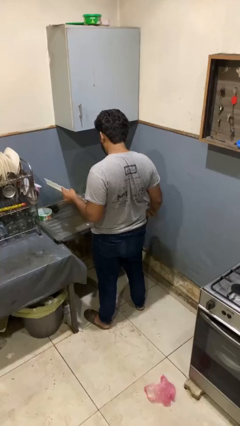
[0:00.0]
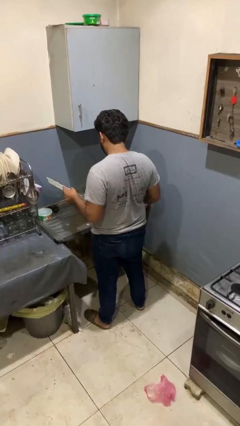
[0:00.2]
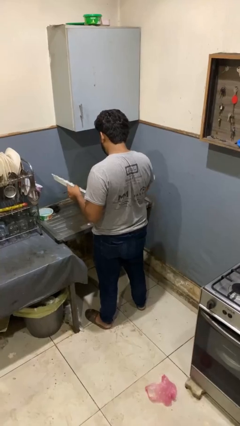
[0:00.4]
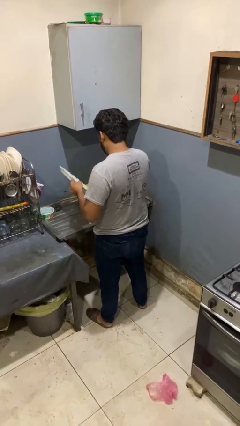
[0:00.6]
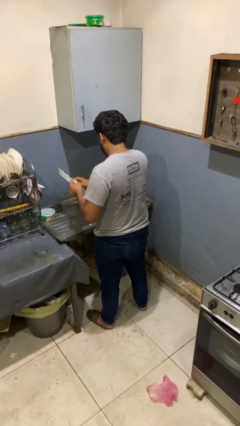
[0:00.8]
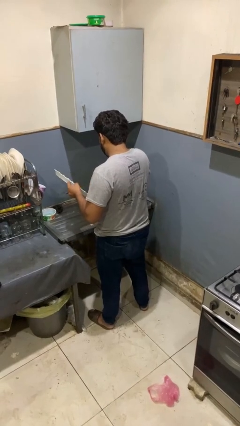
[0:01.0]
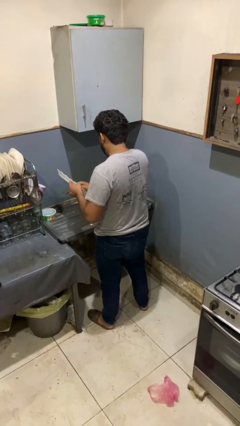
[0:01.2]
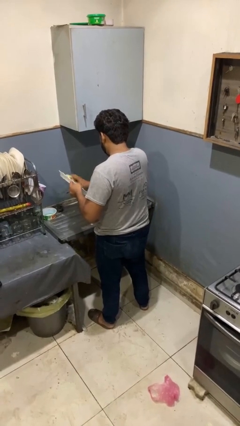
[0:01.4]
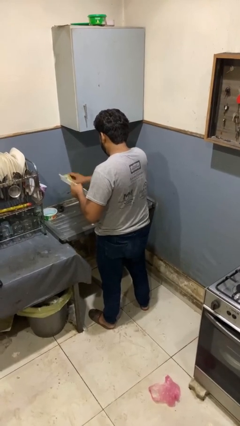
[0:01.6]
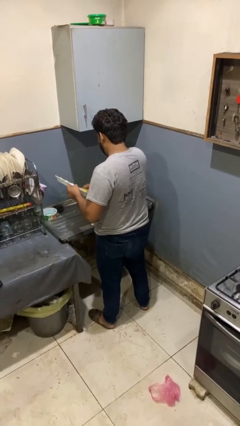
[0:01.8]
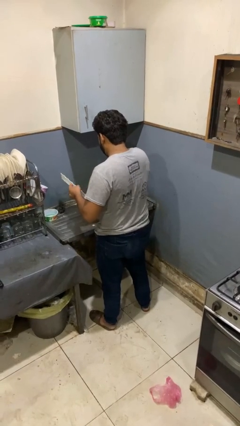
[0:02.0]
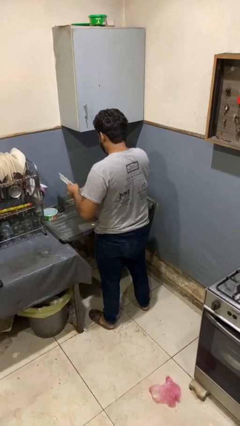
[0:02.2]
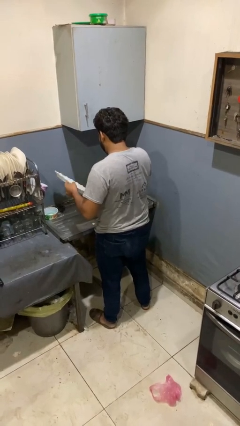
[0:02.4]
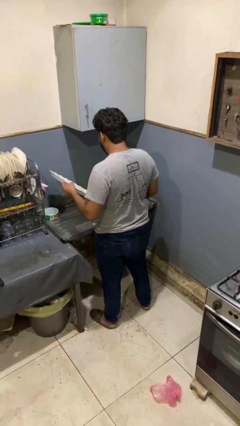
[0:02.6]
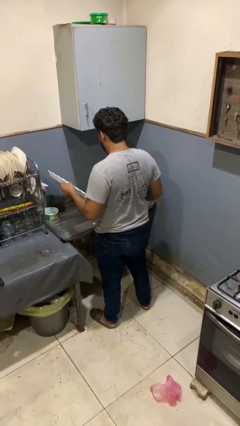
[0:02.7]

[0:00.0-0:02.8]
person washes dish

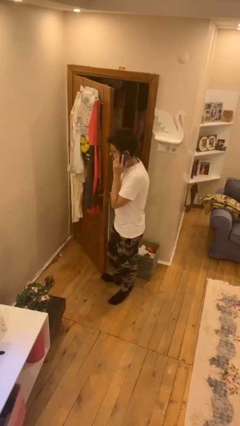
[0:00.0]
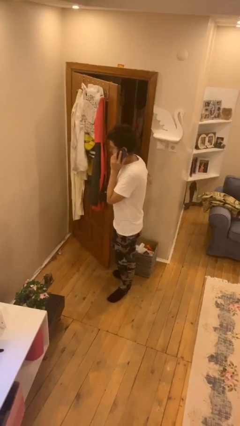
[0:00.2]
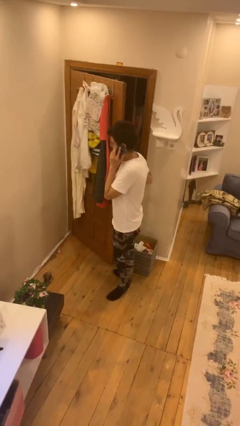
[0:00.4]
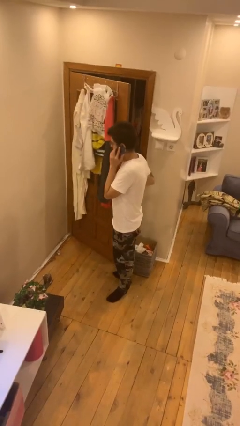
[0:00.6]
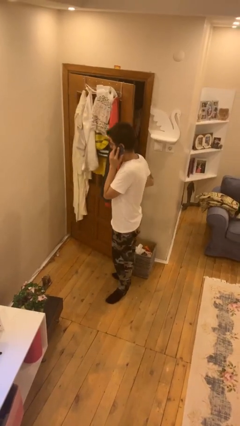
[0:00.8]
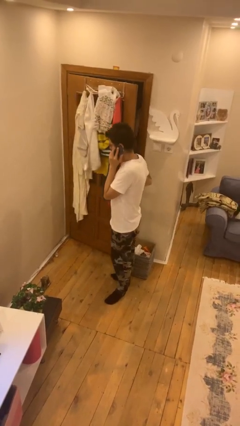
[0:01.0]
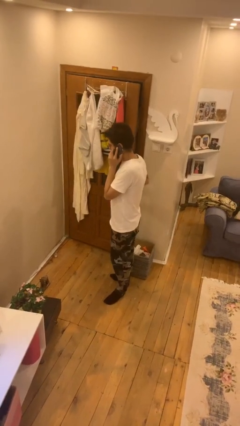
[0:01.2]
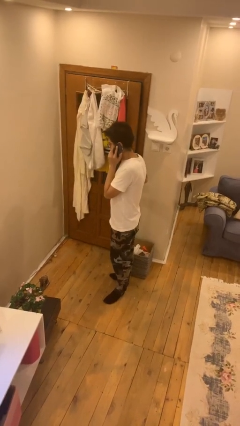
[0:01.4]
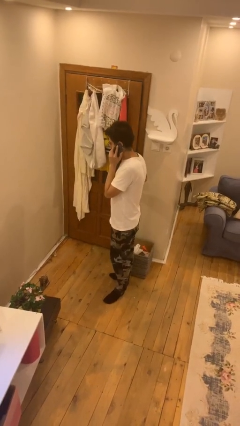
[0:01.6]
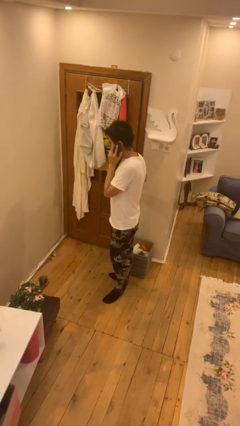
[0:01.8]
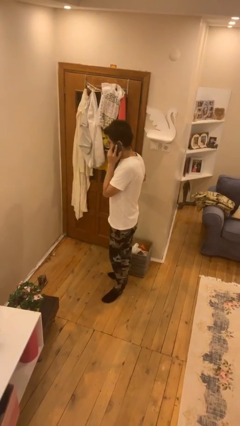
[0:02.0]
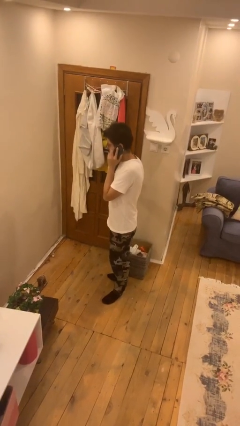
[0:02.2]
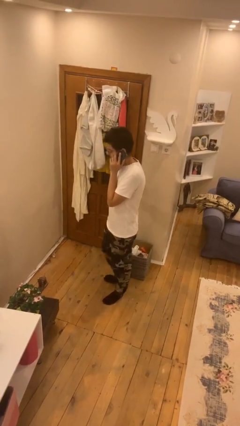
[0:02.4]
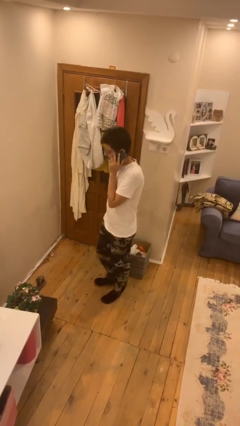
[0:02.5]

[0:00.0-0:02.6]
person closes facility door

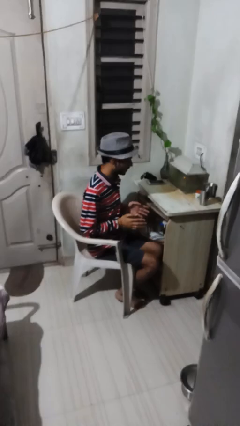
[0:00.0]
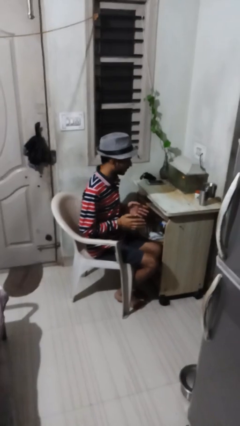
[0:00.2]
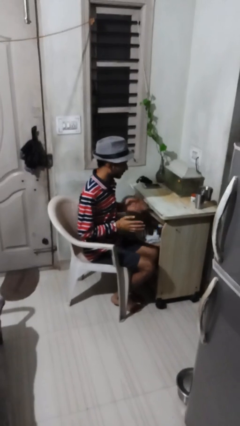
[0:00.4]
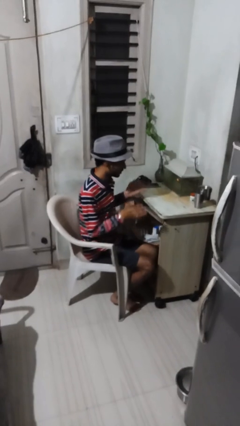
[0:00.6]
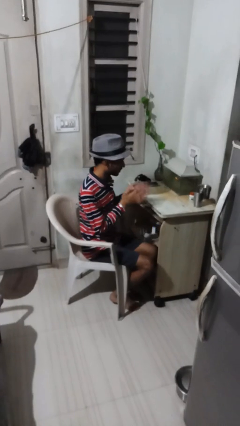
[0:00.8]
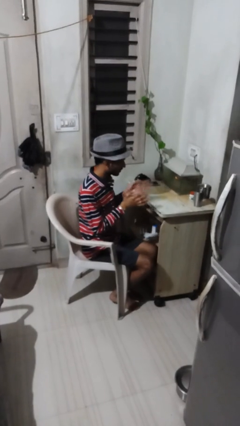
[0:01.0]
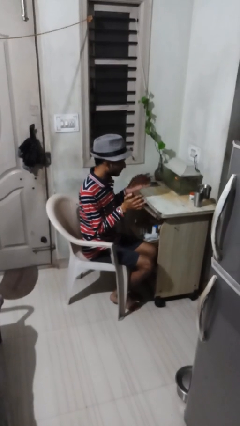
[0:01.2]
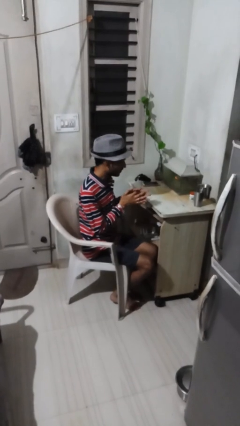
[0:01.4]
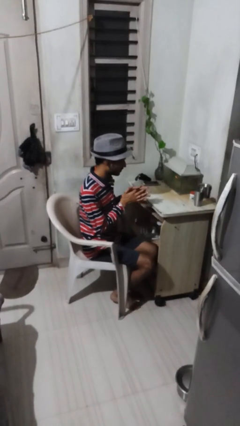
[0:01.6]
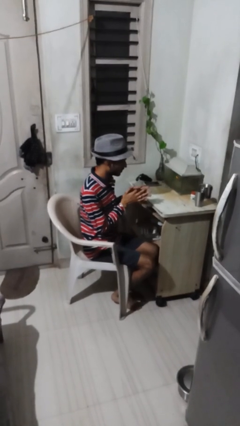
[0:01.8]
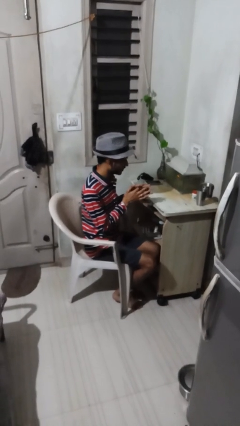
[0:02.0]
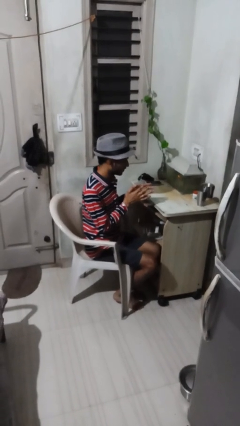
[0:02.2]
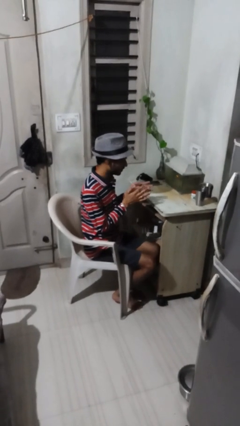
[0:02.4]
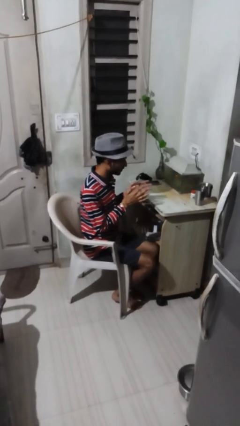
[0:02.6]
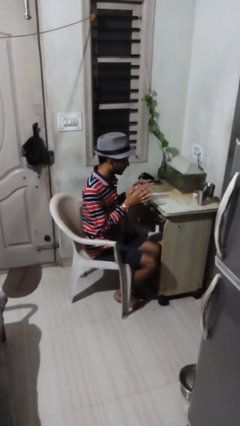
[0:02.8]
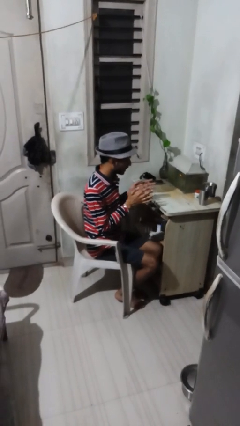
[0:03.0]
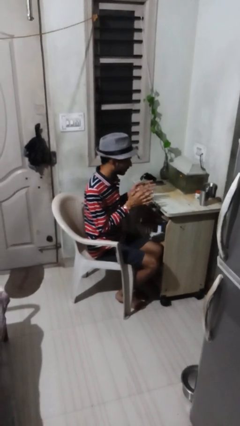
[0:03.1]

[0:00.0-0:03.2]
person claps hands

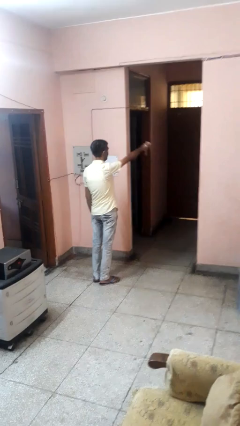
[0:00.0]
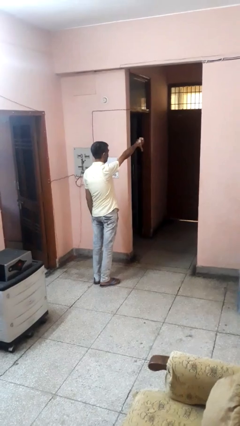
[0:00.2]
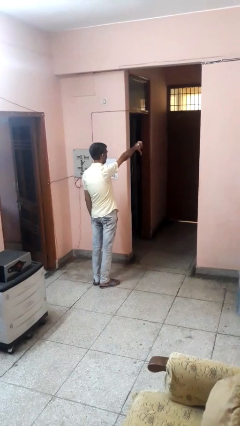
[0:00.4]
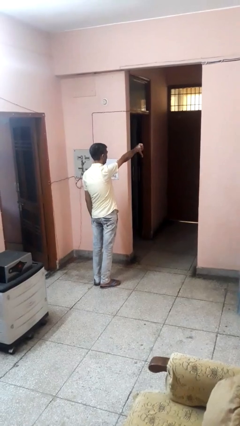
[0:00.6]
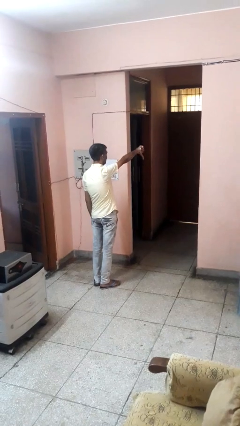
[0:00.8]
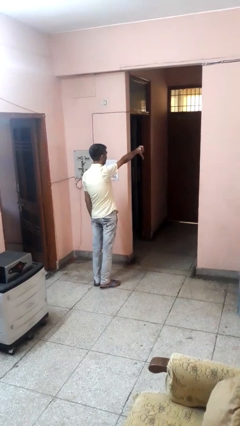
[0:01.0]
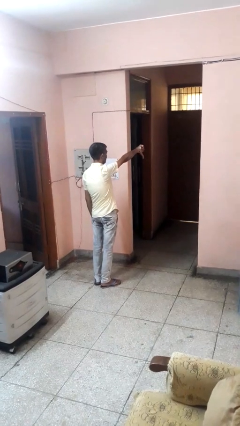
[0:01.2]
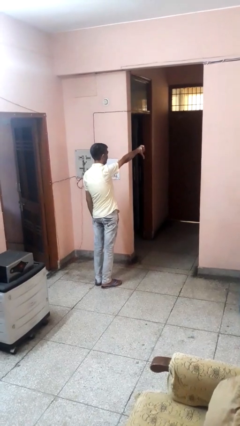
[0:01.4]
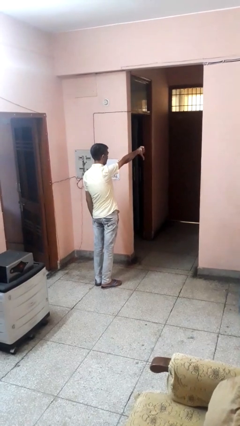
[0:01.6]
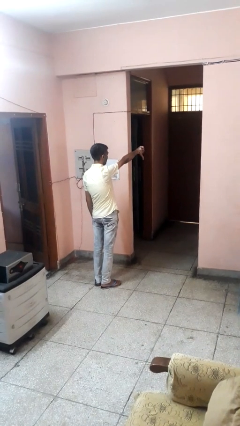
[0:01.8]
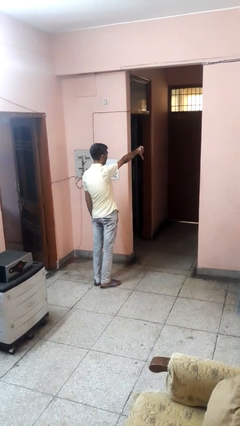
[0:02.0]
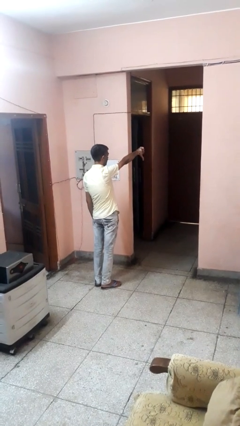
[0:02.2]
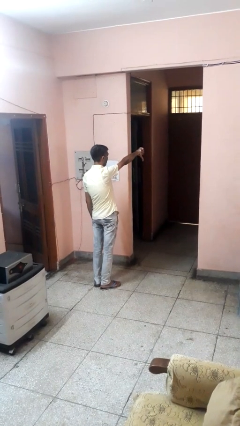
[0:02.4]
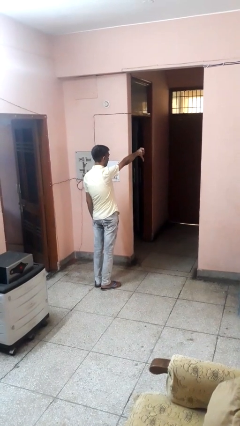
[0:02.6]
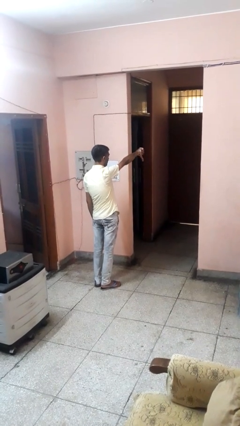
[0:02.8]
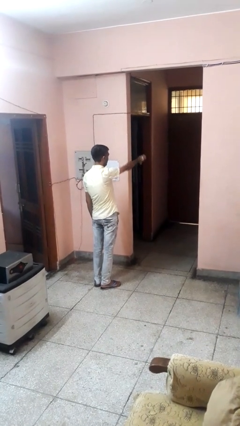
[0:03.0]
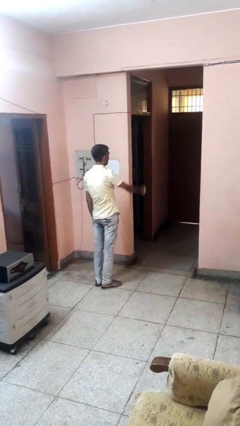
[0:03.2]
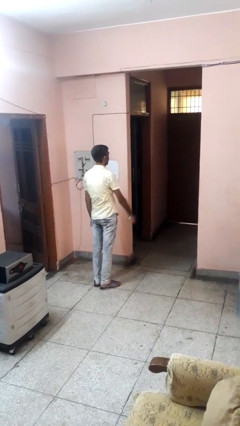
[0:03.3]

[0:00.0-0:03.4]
person gestures thumbs down

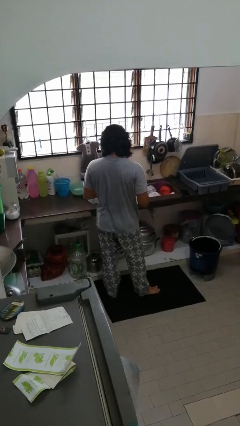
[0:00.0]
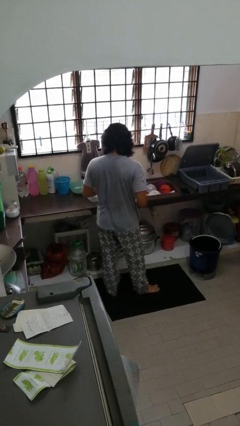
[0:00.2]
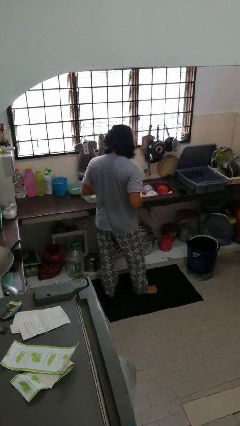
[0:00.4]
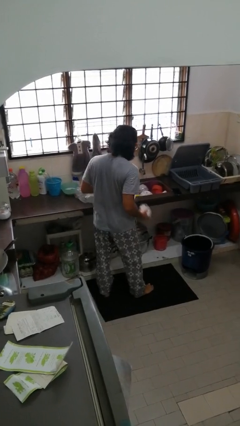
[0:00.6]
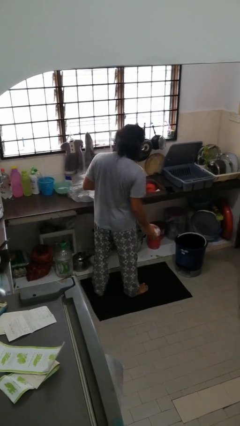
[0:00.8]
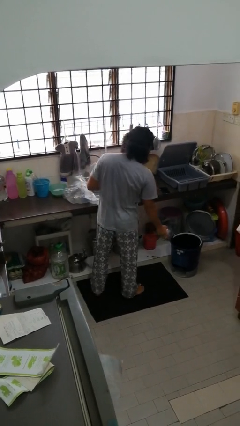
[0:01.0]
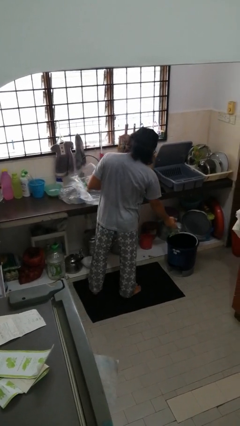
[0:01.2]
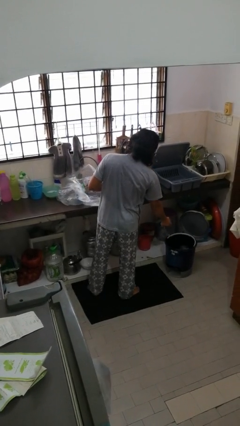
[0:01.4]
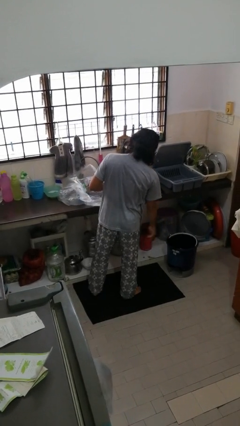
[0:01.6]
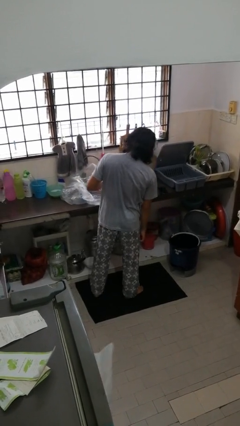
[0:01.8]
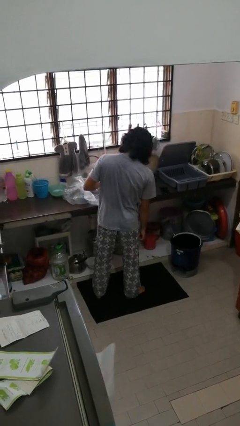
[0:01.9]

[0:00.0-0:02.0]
person discards trash

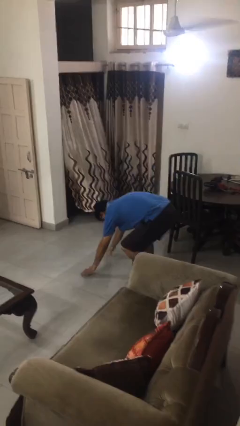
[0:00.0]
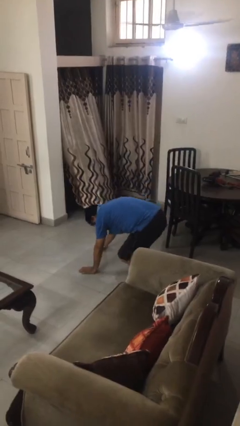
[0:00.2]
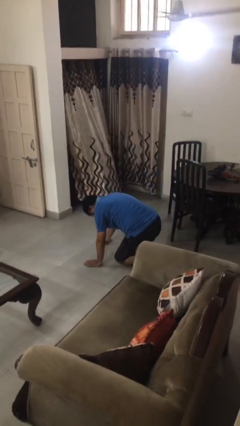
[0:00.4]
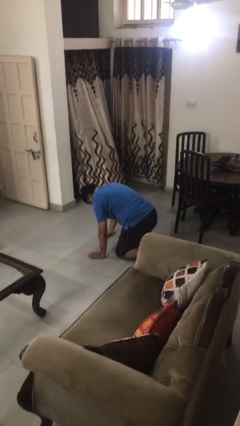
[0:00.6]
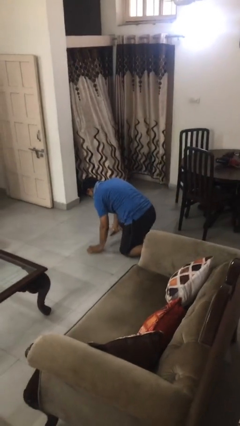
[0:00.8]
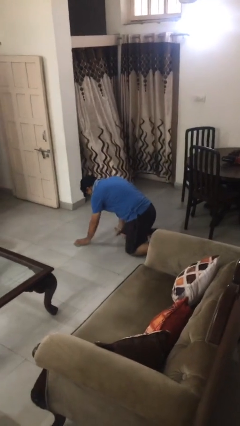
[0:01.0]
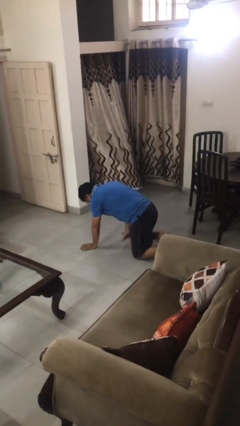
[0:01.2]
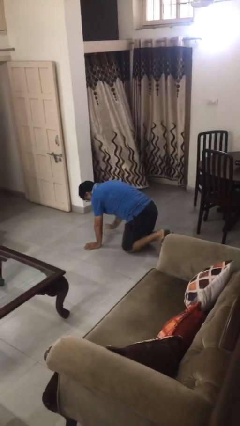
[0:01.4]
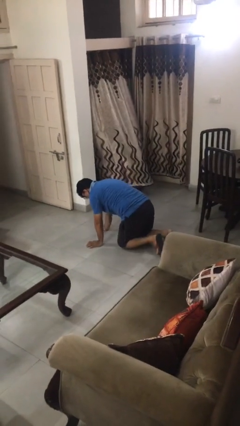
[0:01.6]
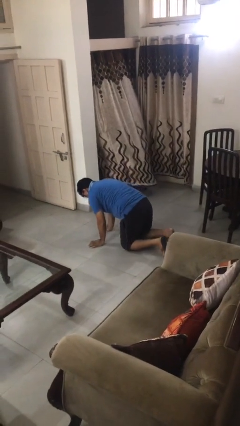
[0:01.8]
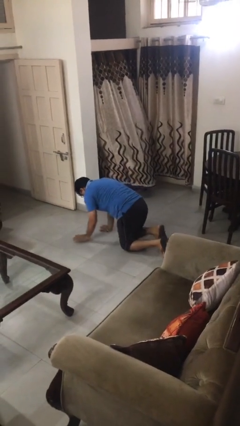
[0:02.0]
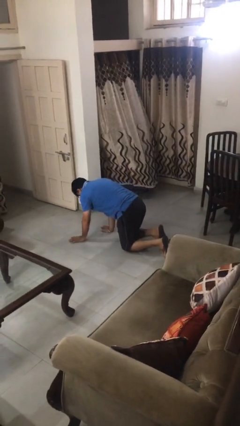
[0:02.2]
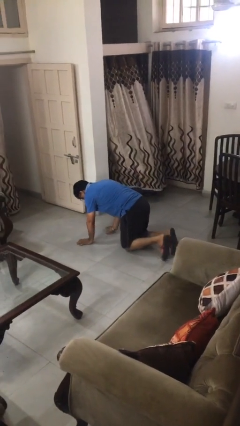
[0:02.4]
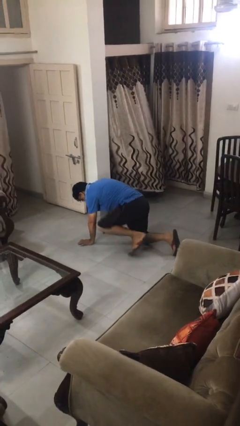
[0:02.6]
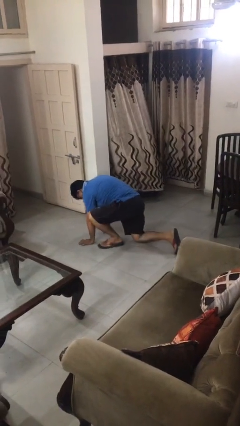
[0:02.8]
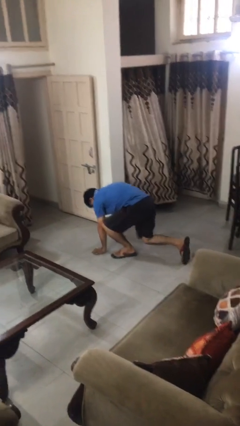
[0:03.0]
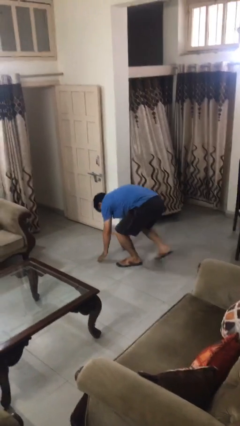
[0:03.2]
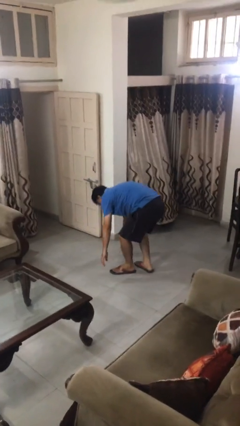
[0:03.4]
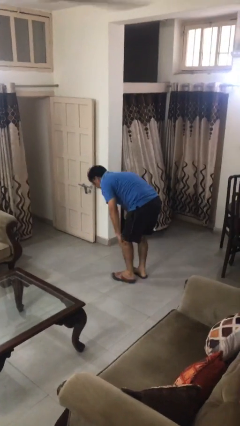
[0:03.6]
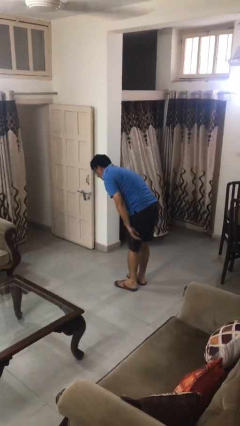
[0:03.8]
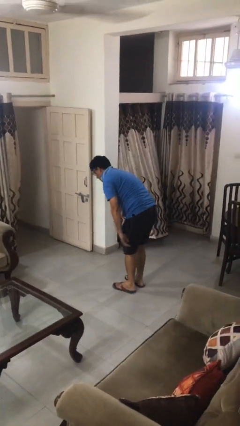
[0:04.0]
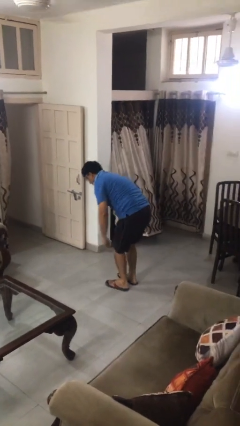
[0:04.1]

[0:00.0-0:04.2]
person crawls
